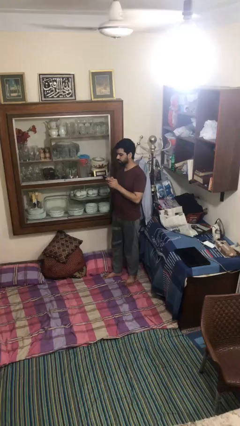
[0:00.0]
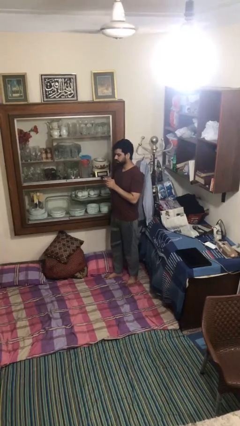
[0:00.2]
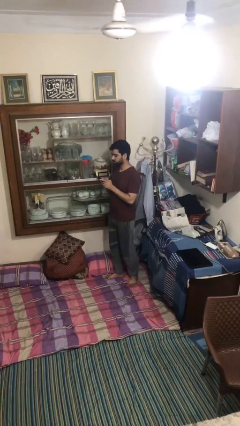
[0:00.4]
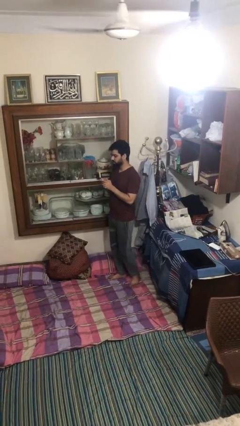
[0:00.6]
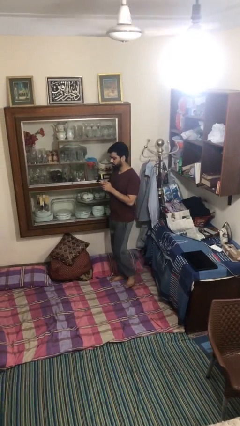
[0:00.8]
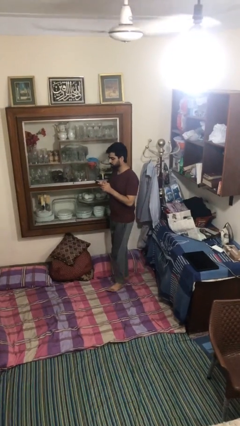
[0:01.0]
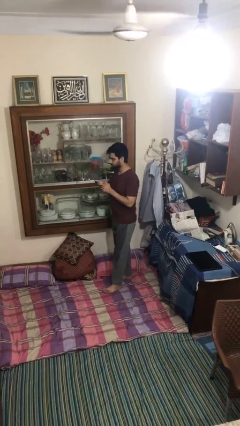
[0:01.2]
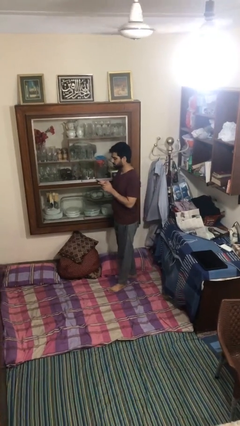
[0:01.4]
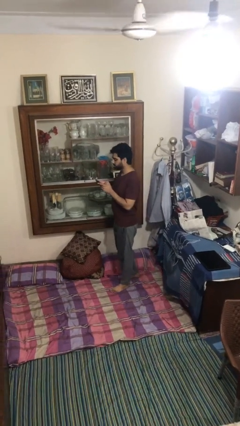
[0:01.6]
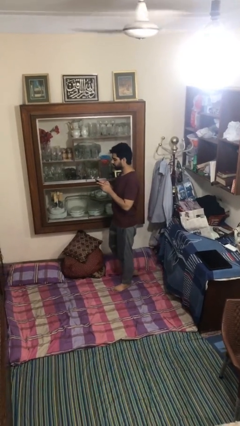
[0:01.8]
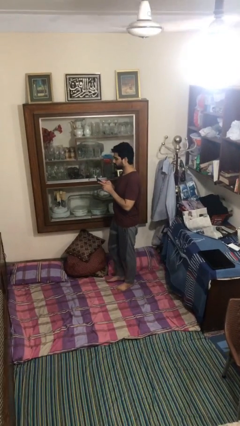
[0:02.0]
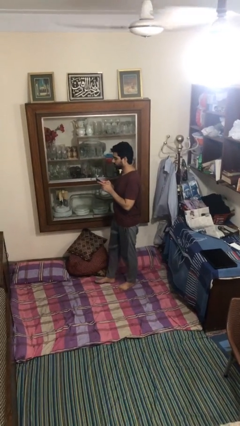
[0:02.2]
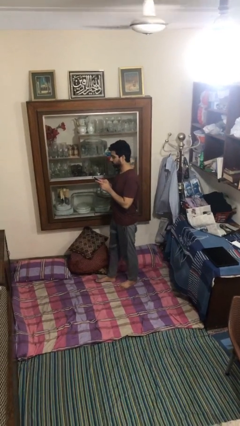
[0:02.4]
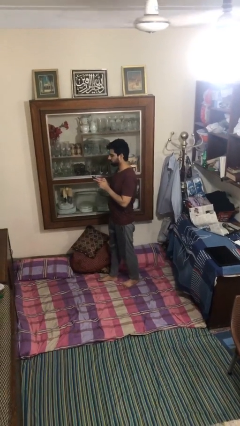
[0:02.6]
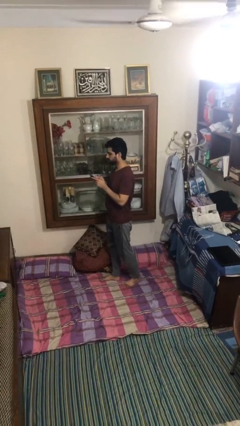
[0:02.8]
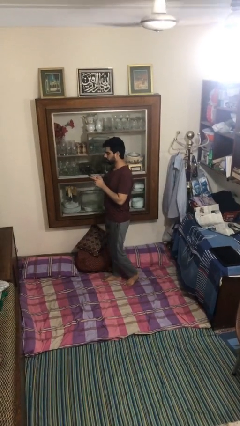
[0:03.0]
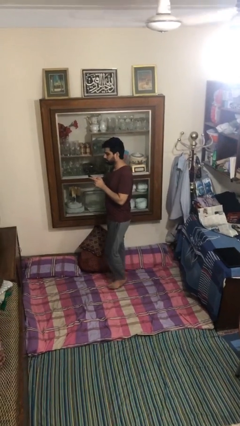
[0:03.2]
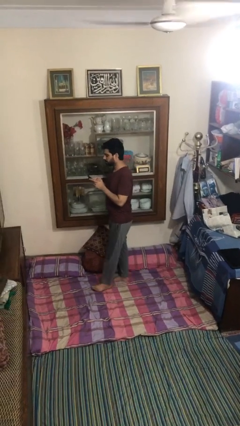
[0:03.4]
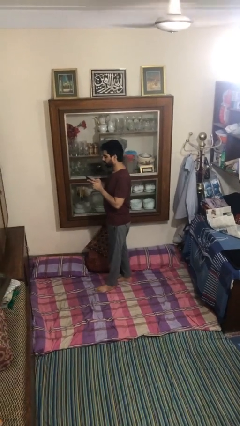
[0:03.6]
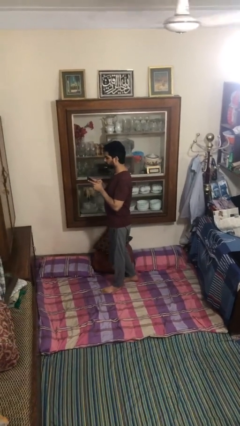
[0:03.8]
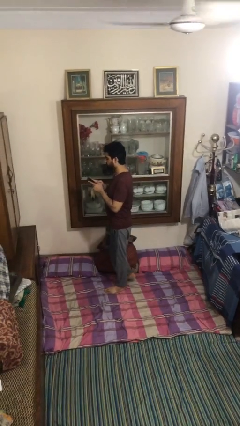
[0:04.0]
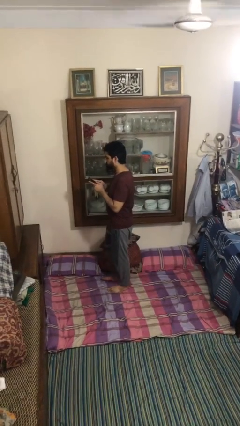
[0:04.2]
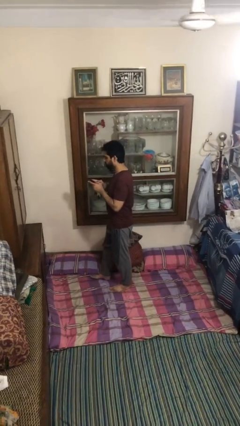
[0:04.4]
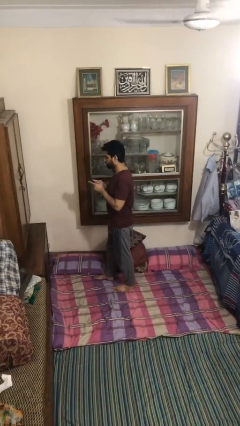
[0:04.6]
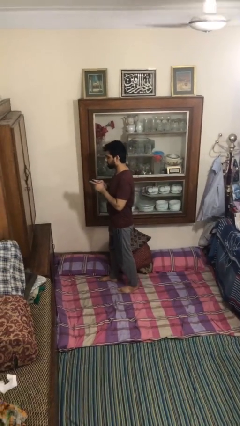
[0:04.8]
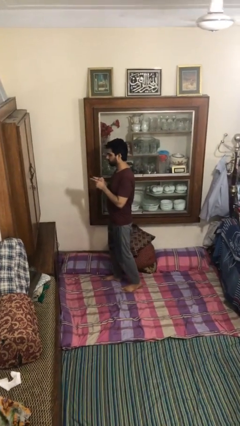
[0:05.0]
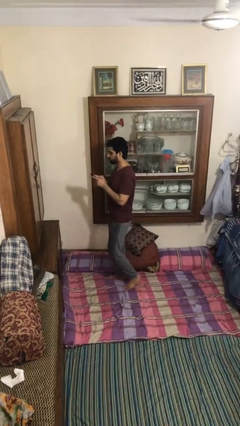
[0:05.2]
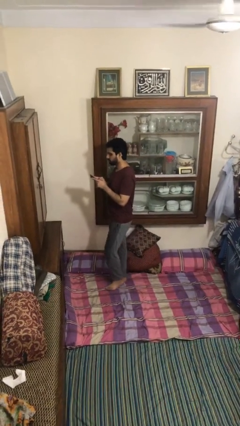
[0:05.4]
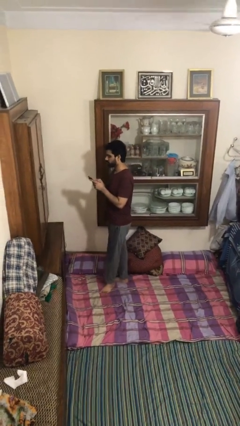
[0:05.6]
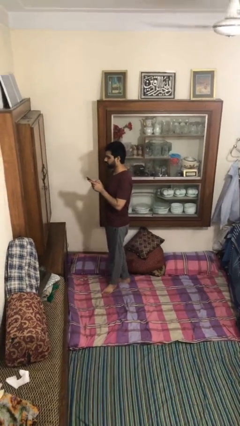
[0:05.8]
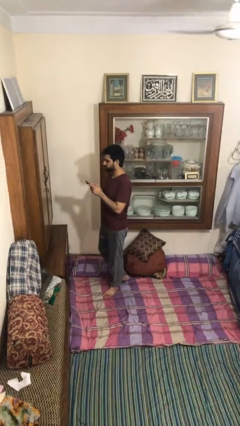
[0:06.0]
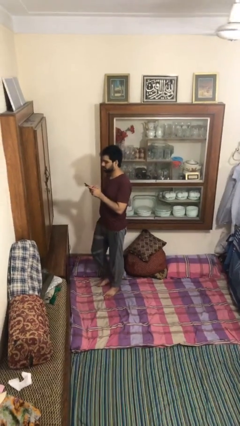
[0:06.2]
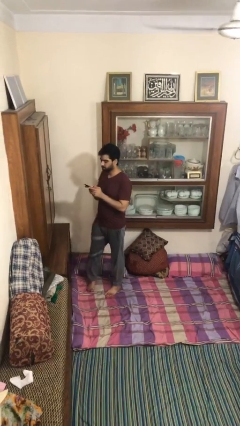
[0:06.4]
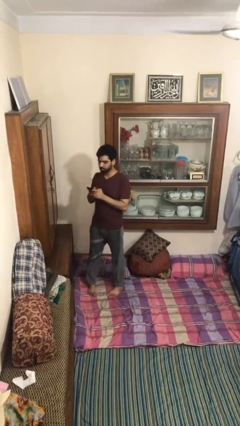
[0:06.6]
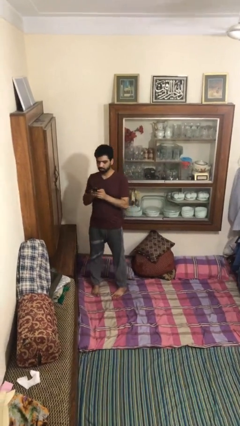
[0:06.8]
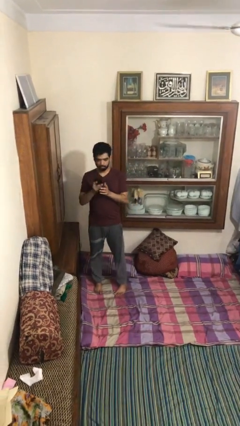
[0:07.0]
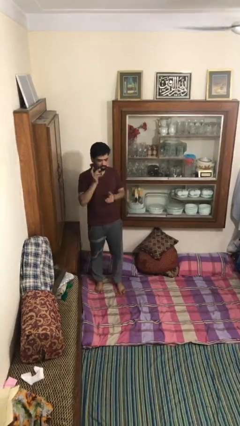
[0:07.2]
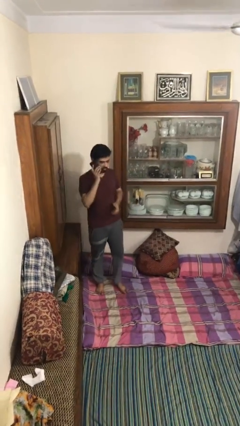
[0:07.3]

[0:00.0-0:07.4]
person texts on phone

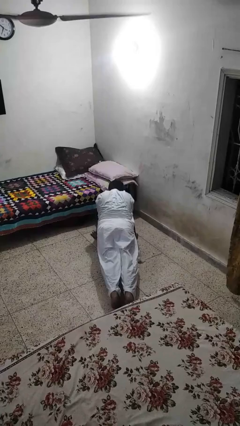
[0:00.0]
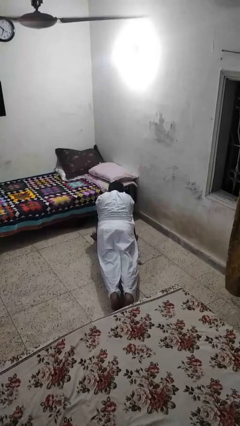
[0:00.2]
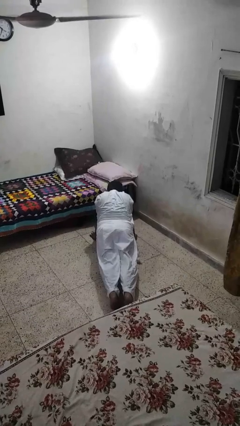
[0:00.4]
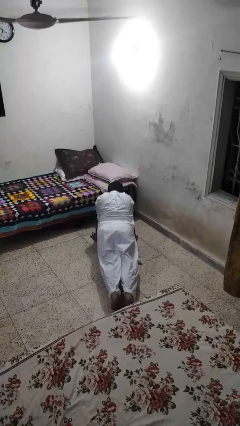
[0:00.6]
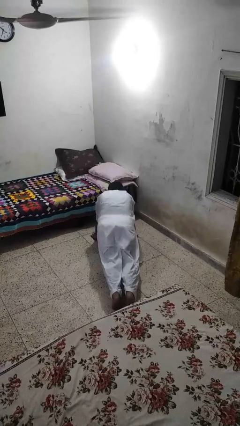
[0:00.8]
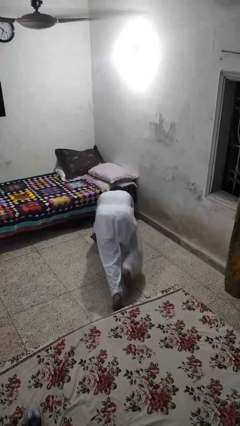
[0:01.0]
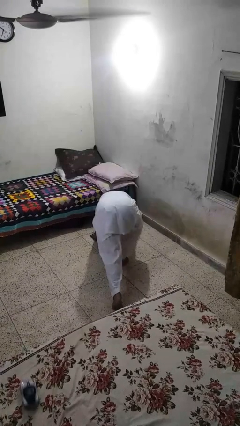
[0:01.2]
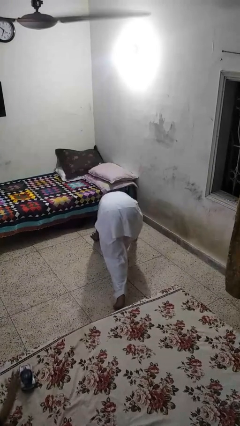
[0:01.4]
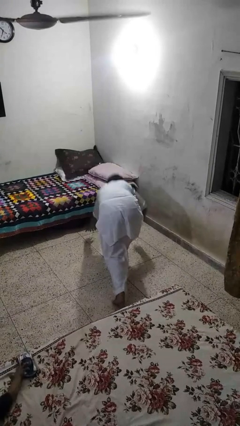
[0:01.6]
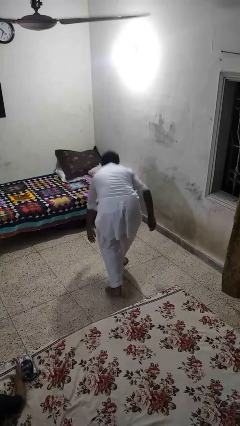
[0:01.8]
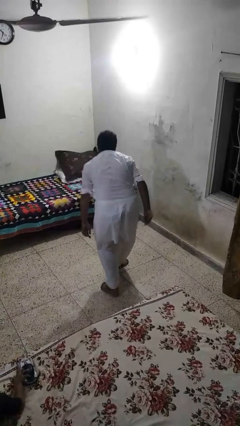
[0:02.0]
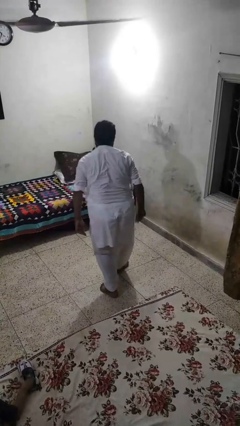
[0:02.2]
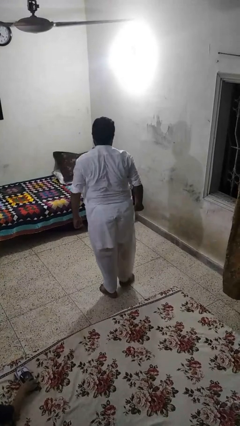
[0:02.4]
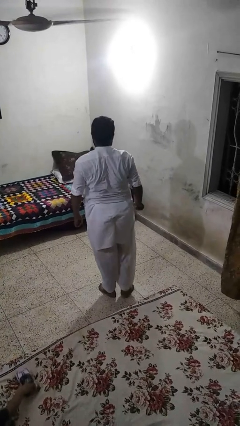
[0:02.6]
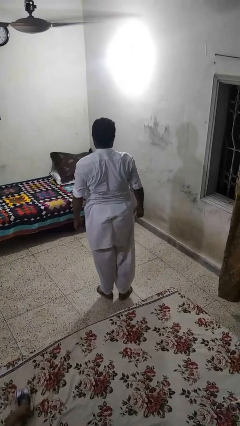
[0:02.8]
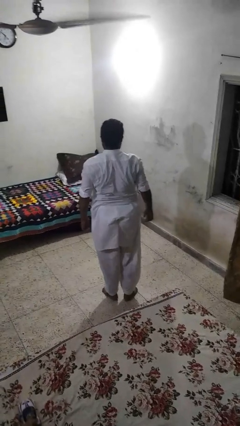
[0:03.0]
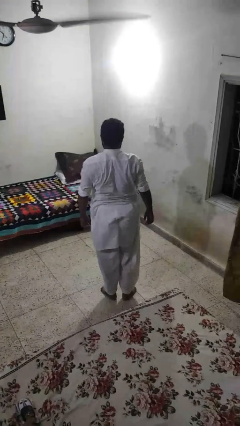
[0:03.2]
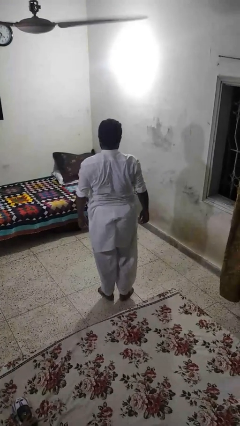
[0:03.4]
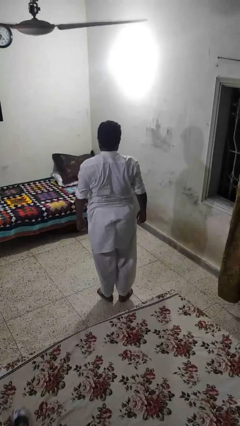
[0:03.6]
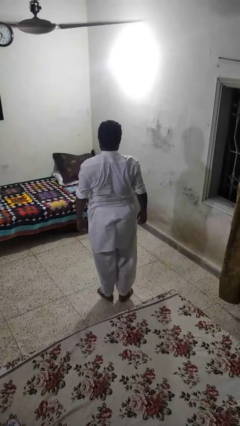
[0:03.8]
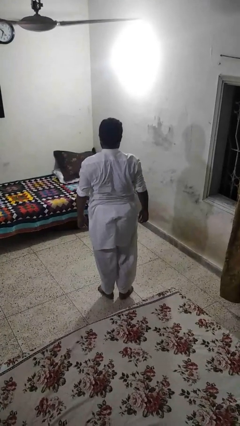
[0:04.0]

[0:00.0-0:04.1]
person stands up from floor

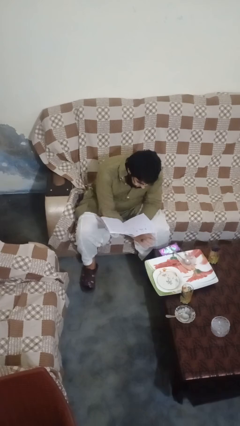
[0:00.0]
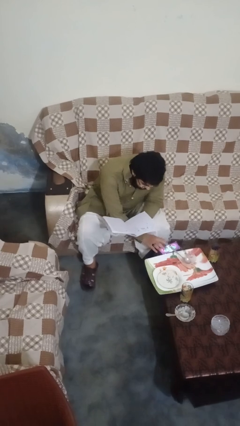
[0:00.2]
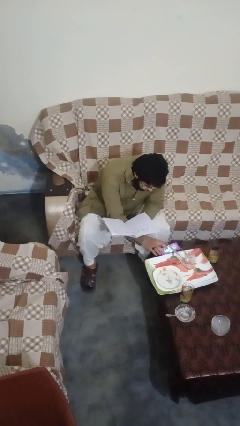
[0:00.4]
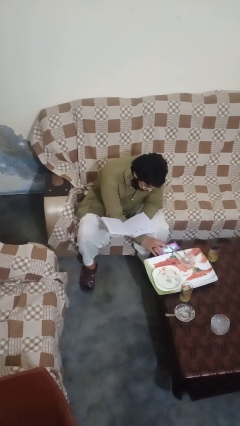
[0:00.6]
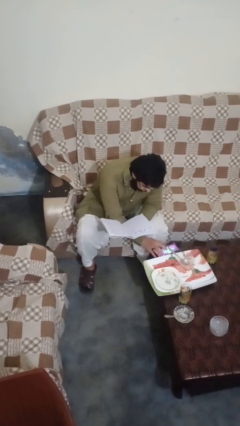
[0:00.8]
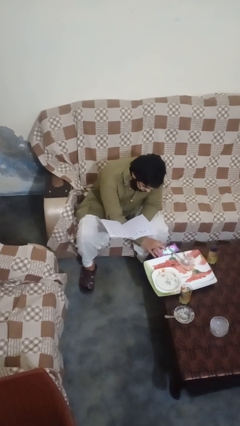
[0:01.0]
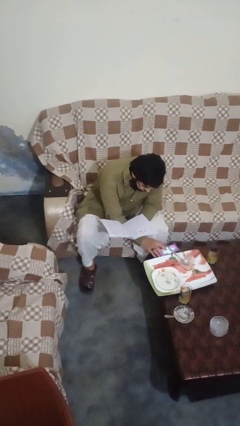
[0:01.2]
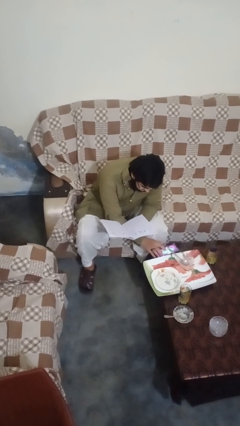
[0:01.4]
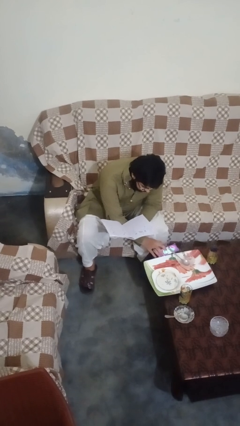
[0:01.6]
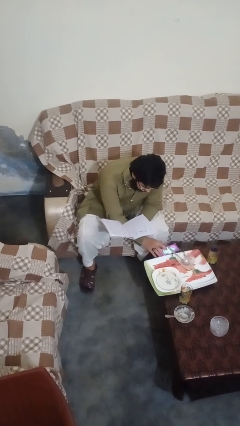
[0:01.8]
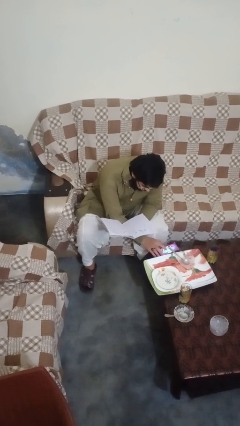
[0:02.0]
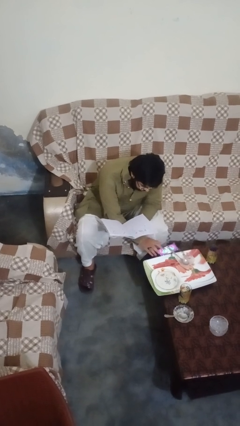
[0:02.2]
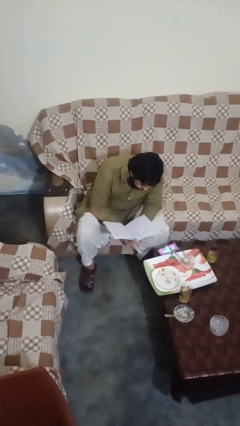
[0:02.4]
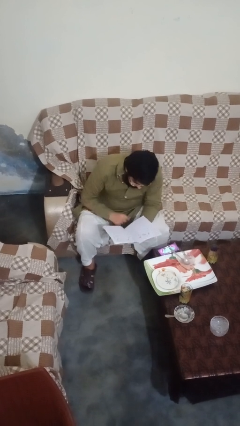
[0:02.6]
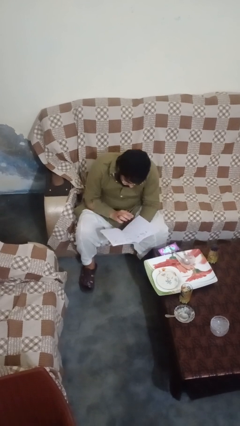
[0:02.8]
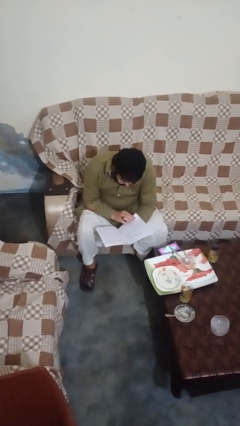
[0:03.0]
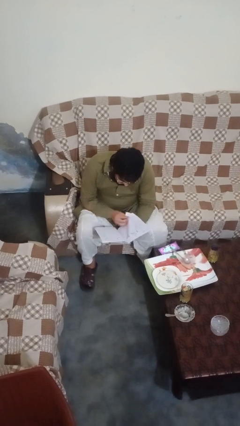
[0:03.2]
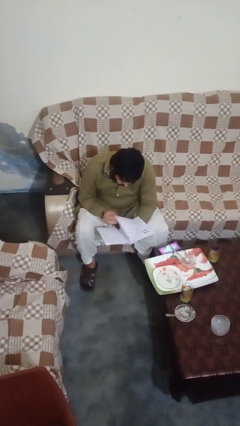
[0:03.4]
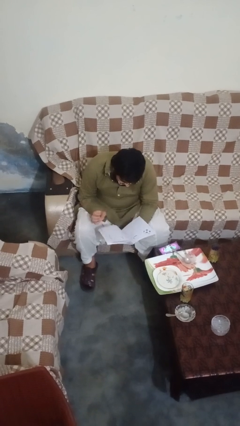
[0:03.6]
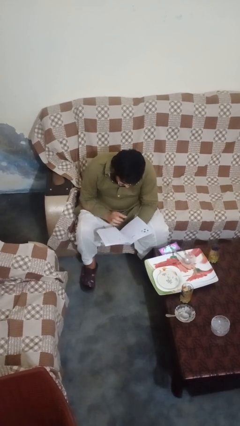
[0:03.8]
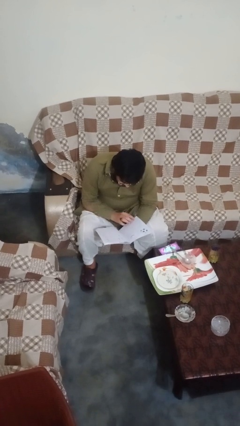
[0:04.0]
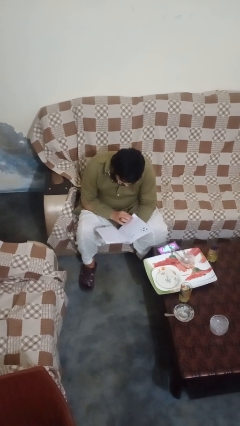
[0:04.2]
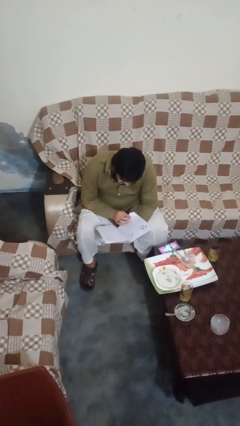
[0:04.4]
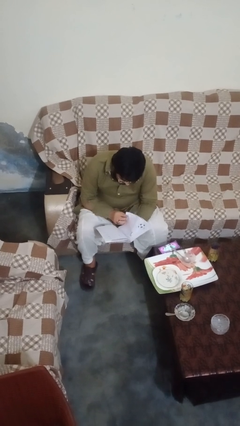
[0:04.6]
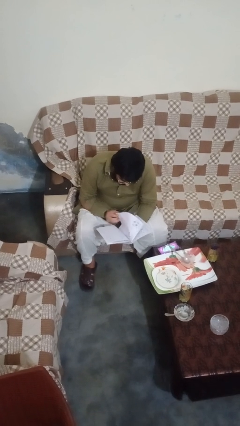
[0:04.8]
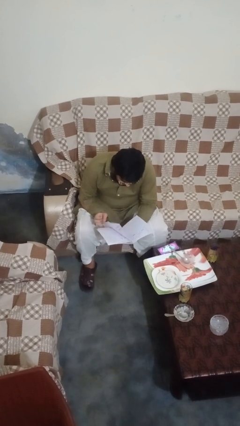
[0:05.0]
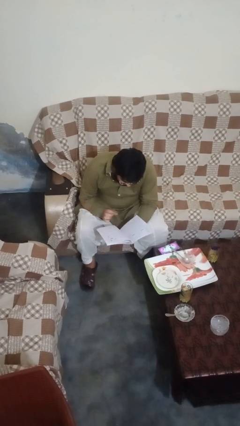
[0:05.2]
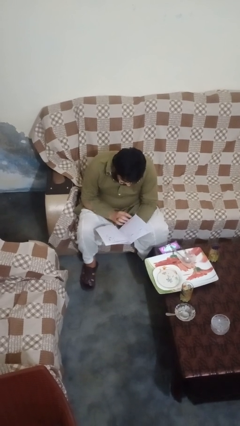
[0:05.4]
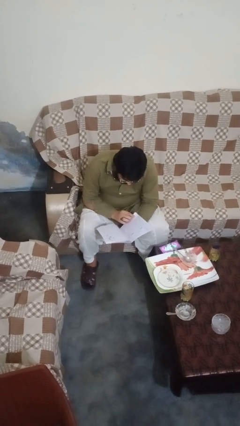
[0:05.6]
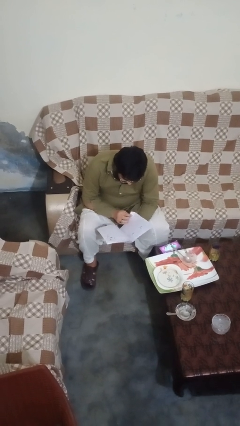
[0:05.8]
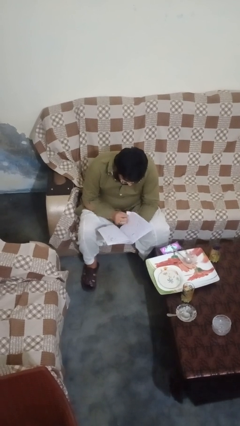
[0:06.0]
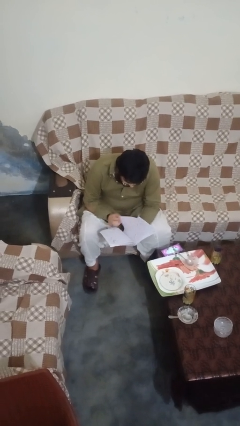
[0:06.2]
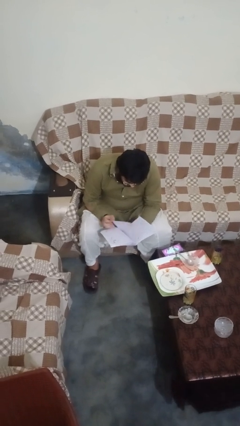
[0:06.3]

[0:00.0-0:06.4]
person reads book
